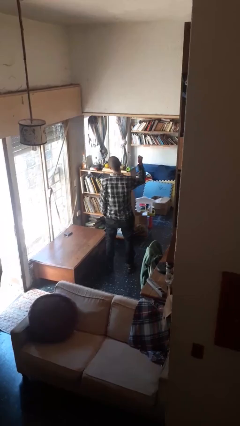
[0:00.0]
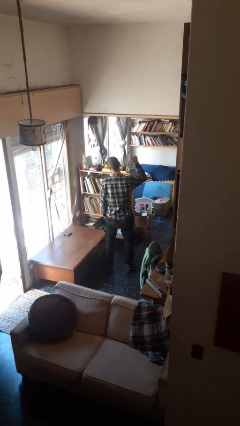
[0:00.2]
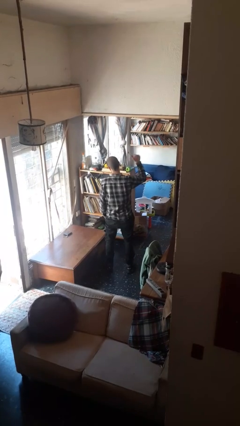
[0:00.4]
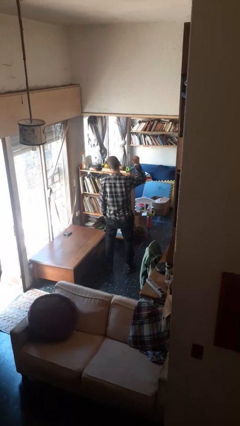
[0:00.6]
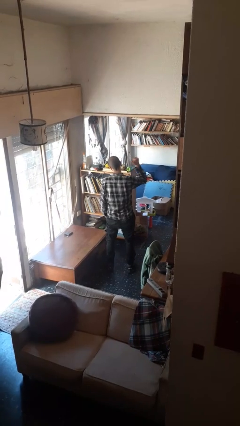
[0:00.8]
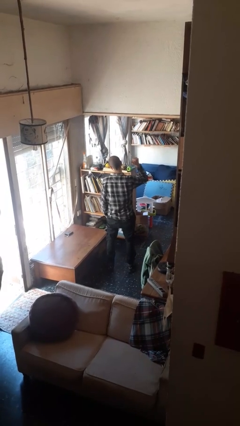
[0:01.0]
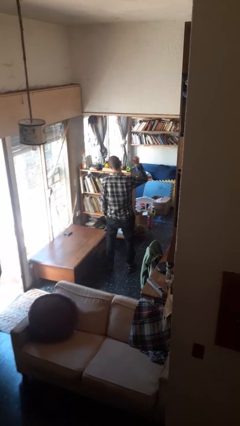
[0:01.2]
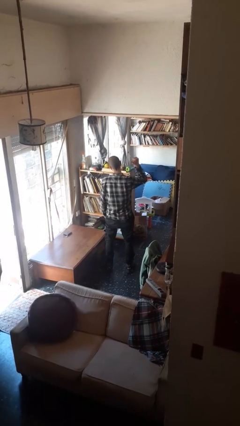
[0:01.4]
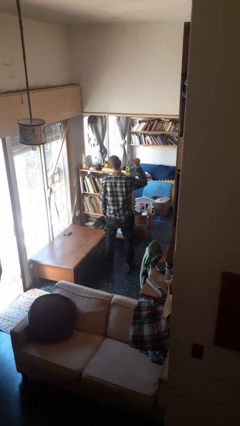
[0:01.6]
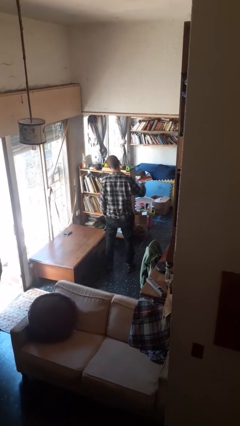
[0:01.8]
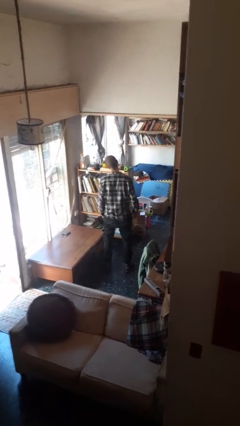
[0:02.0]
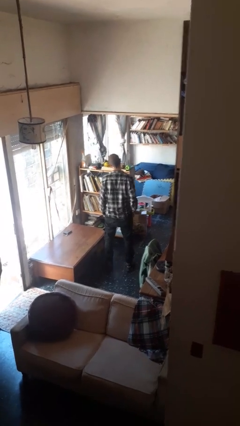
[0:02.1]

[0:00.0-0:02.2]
person gestures behind me

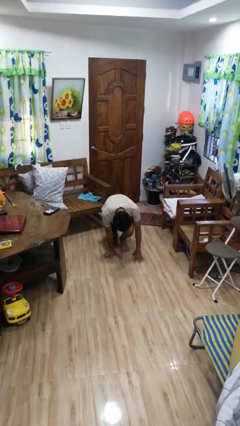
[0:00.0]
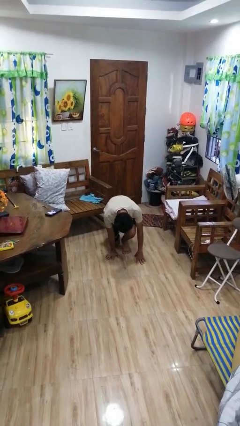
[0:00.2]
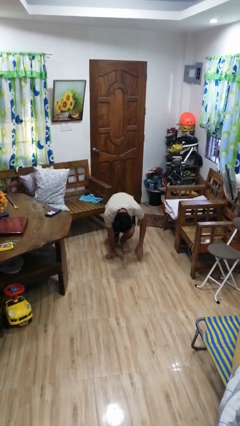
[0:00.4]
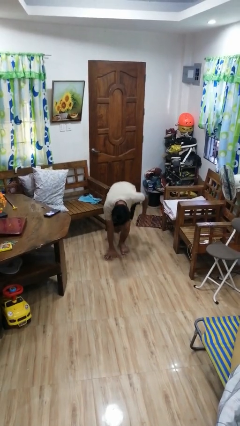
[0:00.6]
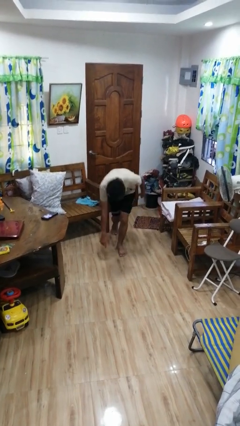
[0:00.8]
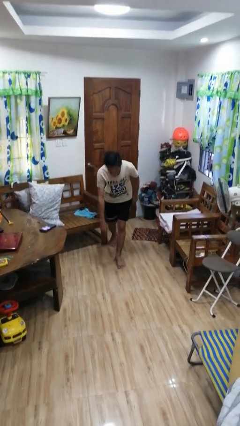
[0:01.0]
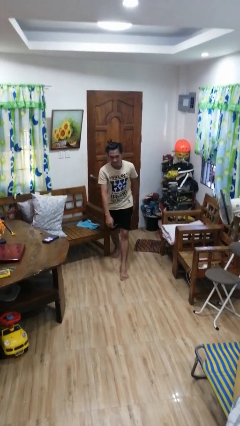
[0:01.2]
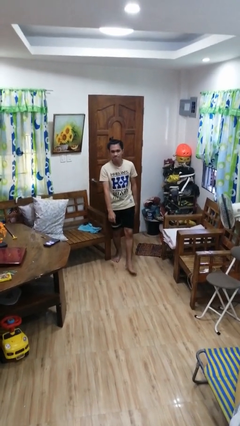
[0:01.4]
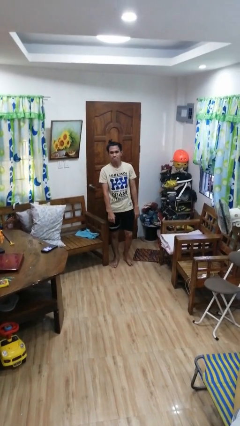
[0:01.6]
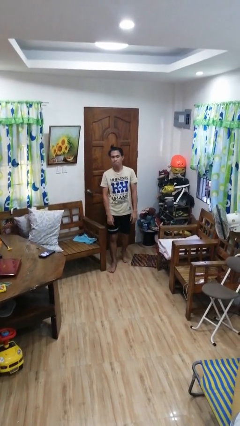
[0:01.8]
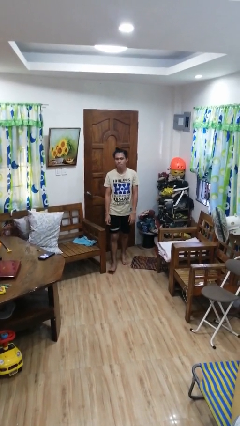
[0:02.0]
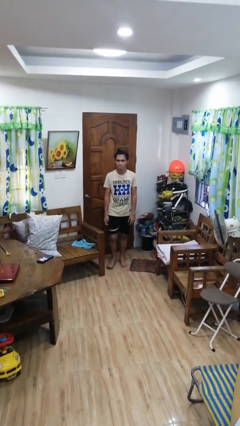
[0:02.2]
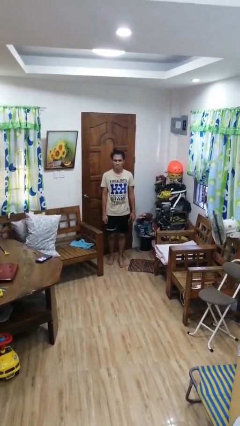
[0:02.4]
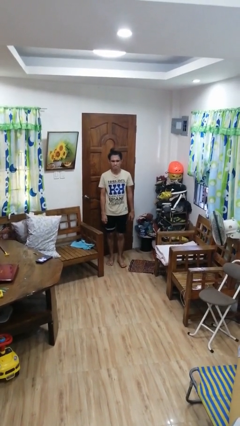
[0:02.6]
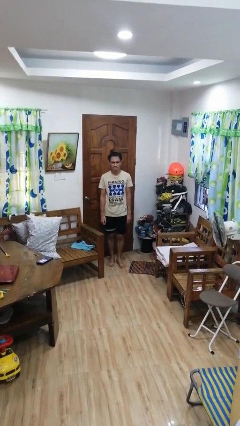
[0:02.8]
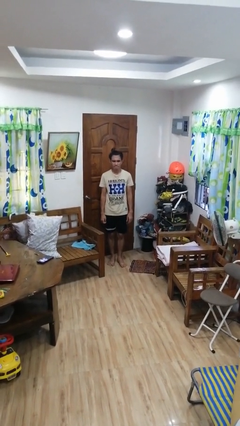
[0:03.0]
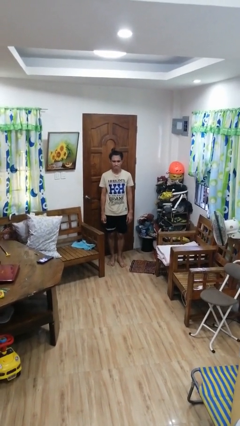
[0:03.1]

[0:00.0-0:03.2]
person stands up from floor

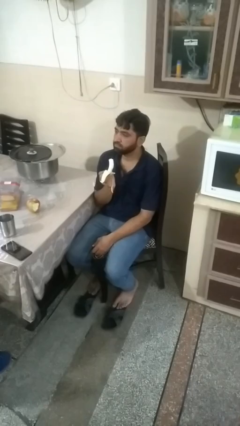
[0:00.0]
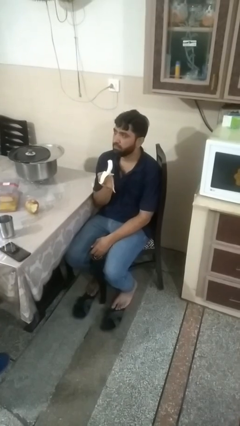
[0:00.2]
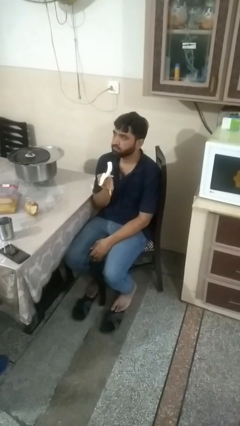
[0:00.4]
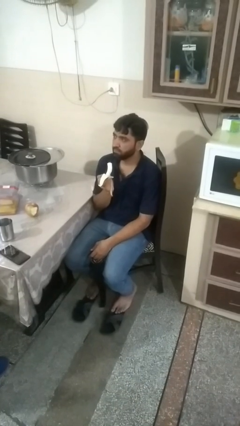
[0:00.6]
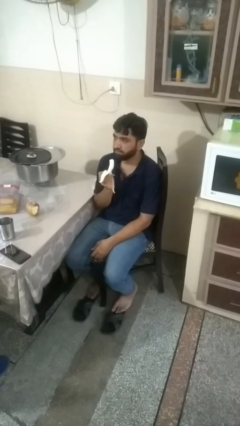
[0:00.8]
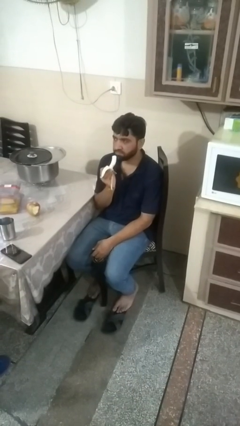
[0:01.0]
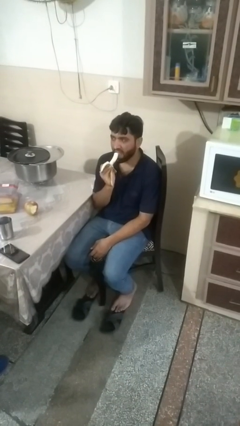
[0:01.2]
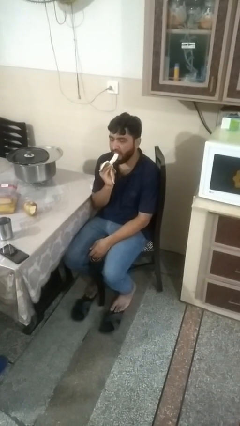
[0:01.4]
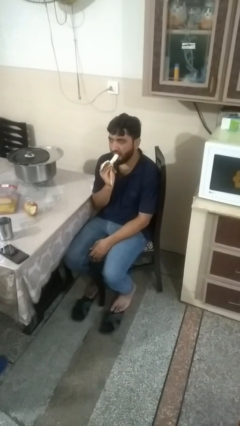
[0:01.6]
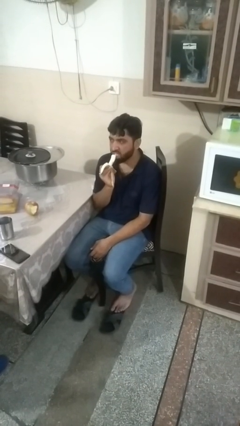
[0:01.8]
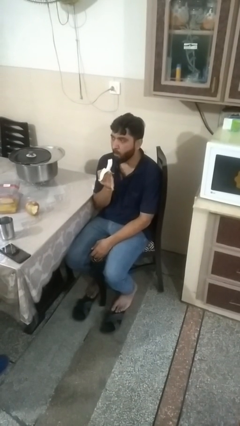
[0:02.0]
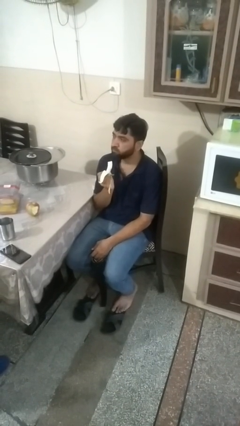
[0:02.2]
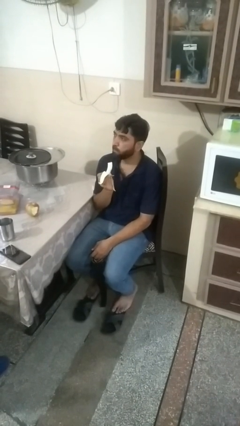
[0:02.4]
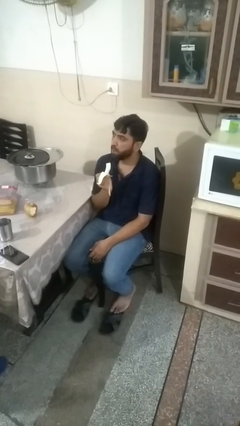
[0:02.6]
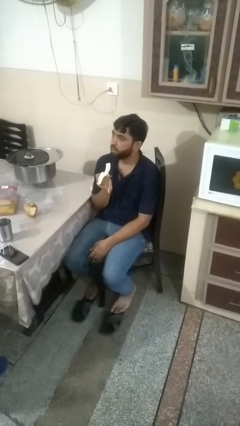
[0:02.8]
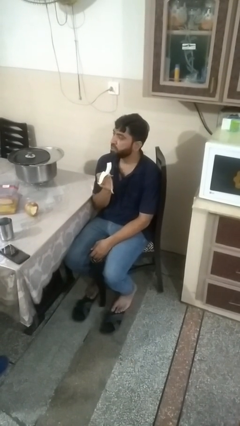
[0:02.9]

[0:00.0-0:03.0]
person eats banana

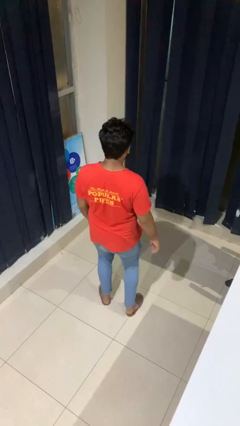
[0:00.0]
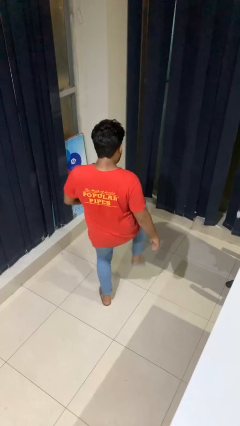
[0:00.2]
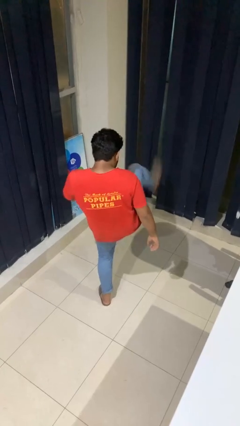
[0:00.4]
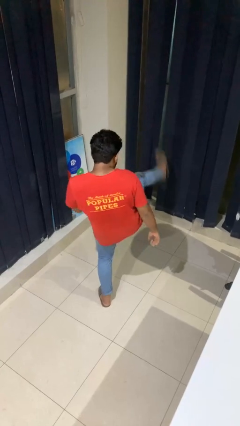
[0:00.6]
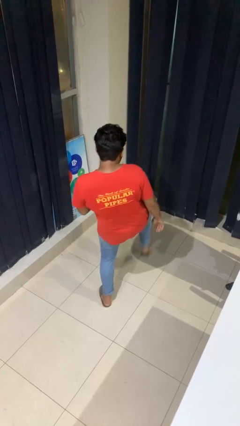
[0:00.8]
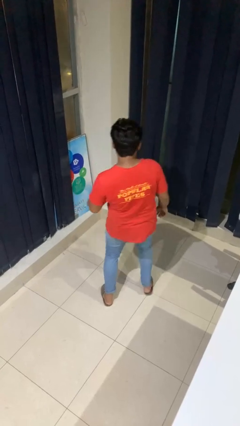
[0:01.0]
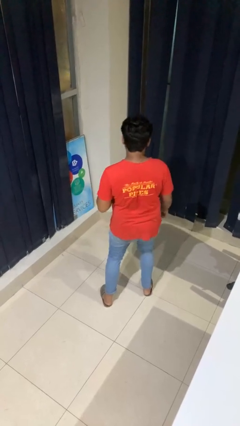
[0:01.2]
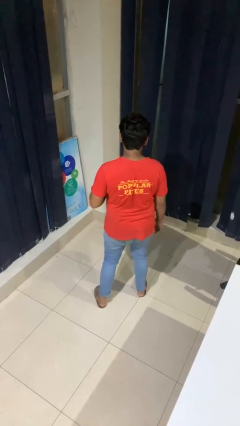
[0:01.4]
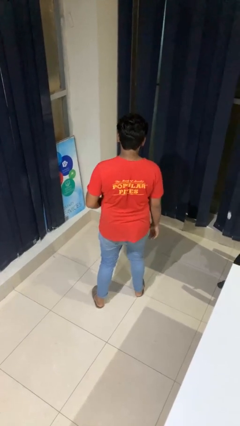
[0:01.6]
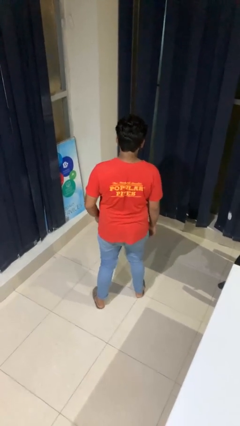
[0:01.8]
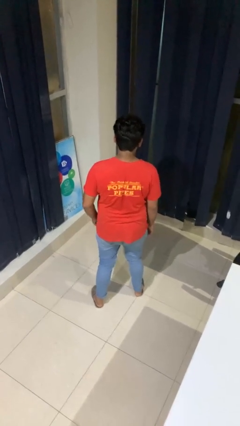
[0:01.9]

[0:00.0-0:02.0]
person karate kicks

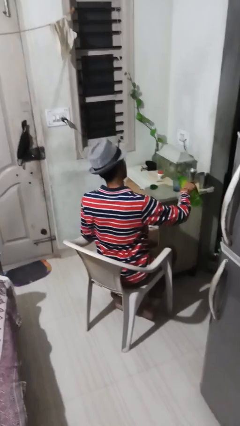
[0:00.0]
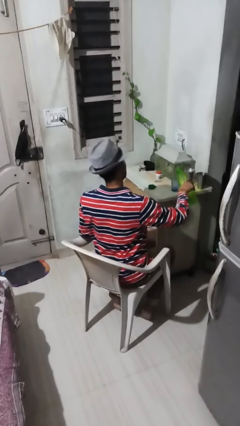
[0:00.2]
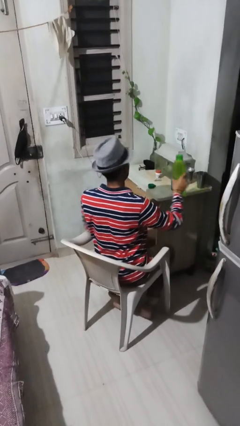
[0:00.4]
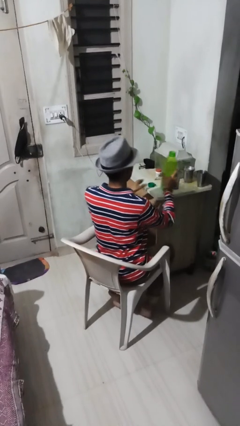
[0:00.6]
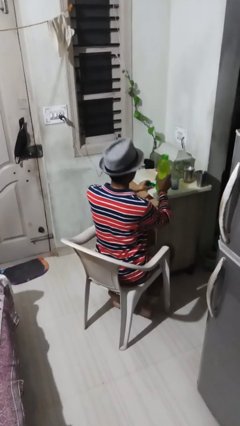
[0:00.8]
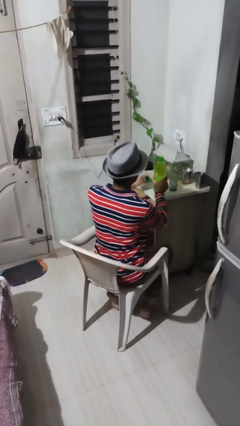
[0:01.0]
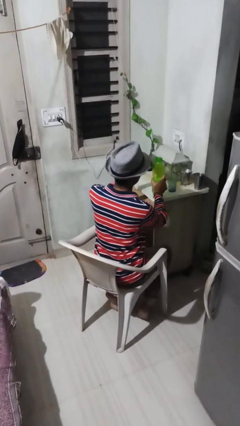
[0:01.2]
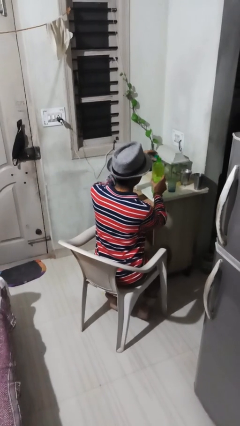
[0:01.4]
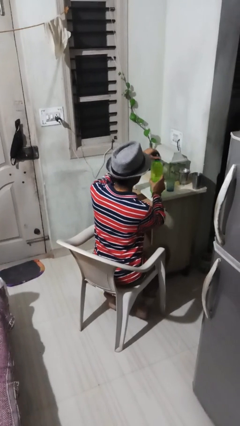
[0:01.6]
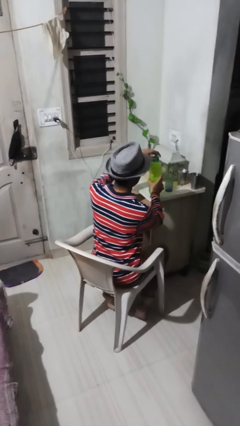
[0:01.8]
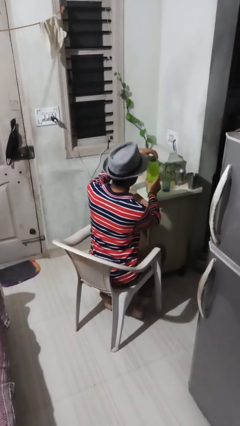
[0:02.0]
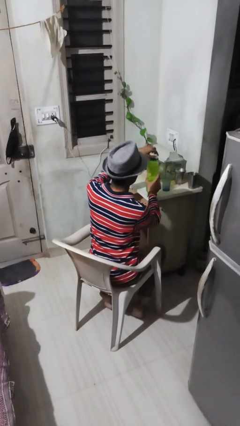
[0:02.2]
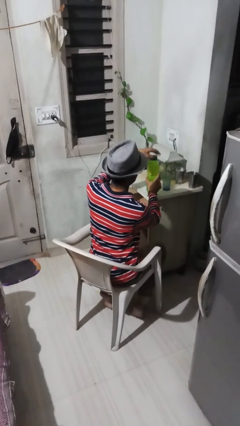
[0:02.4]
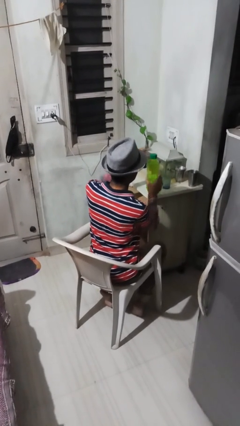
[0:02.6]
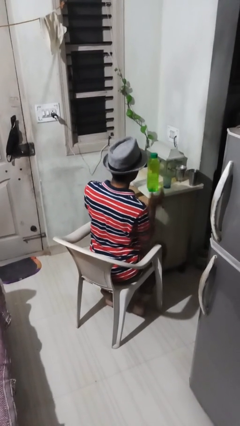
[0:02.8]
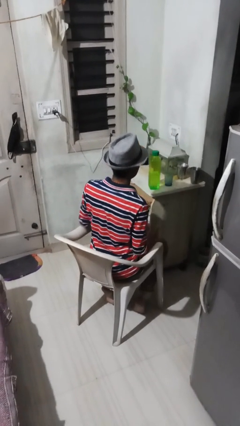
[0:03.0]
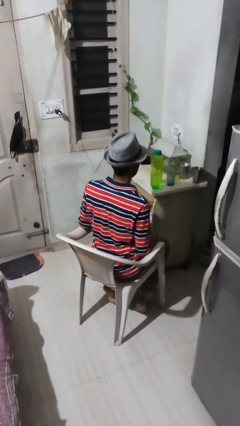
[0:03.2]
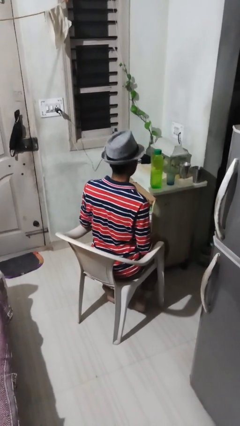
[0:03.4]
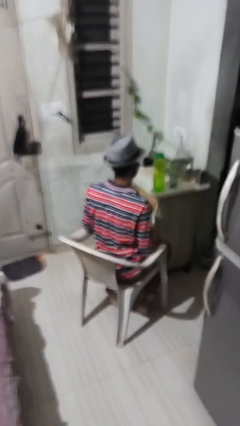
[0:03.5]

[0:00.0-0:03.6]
person screws lid to bottle

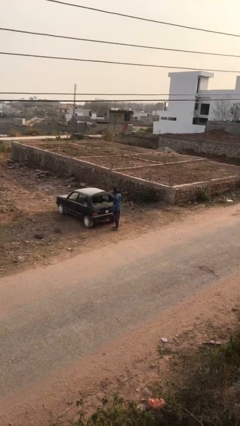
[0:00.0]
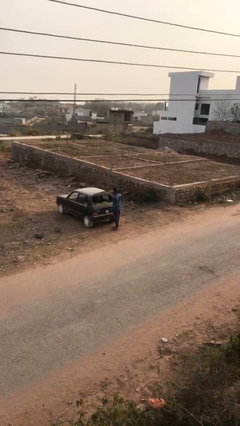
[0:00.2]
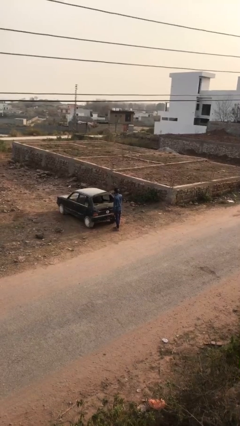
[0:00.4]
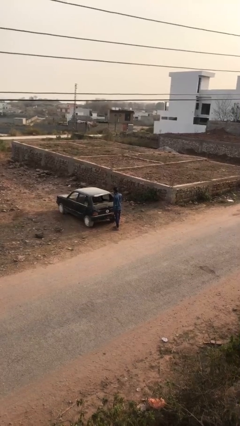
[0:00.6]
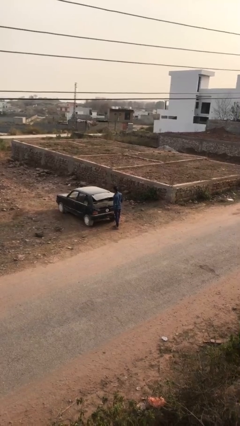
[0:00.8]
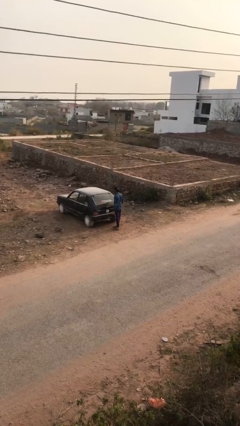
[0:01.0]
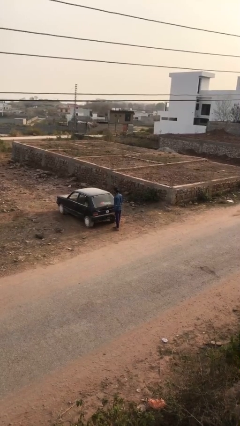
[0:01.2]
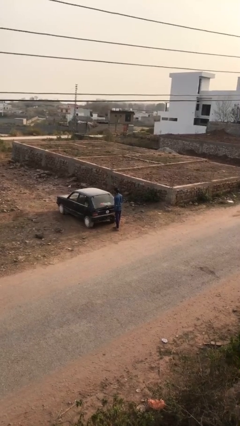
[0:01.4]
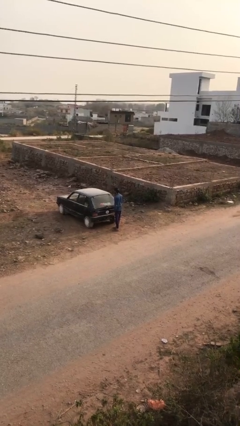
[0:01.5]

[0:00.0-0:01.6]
person closes car trunk

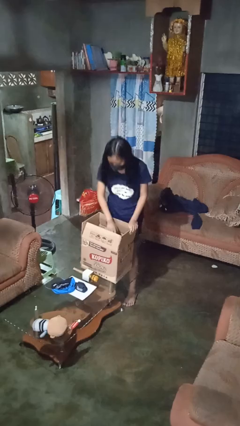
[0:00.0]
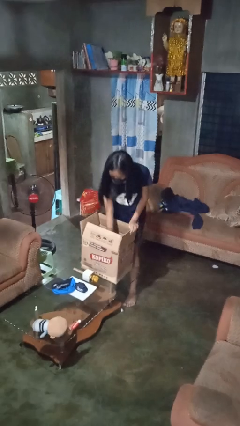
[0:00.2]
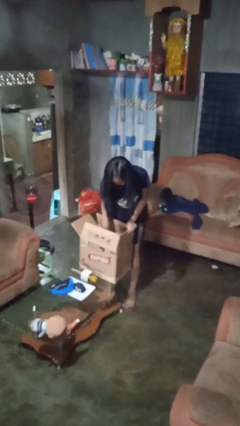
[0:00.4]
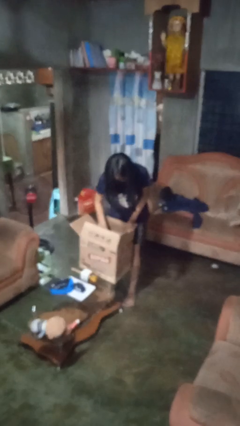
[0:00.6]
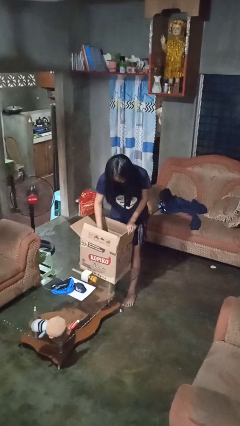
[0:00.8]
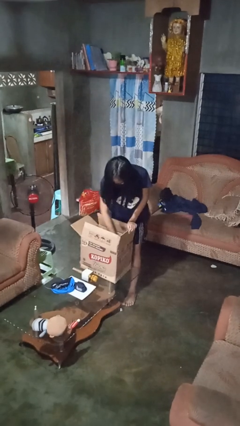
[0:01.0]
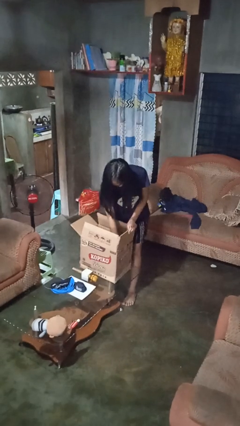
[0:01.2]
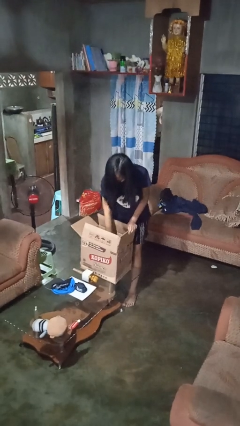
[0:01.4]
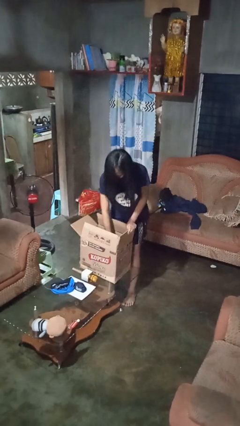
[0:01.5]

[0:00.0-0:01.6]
person searches in box
